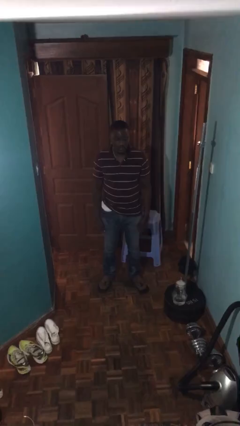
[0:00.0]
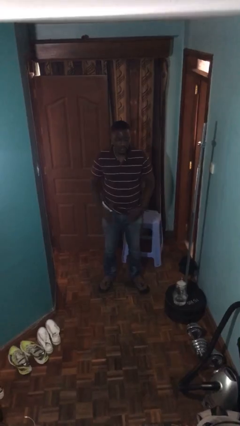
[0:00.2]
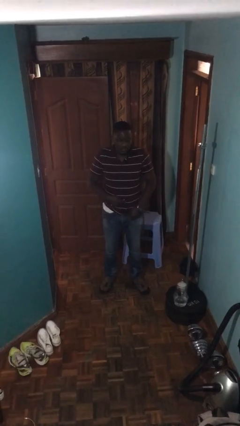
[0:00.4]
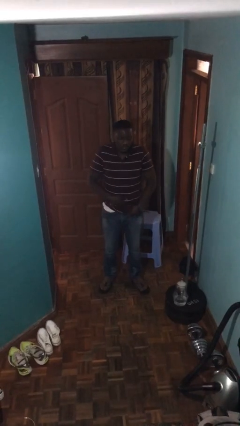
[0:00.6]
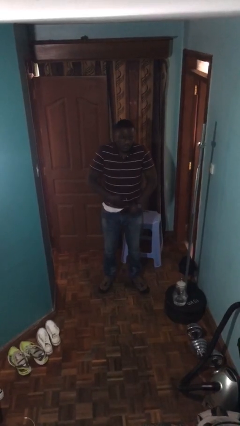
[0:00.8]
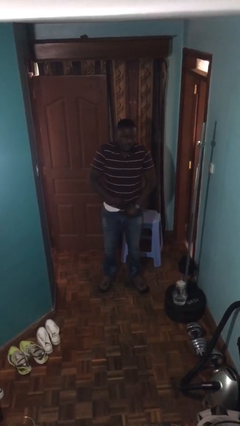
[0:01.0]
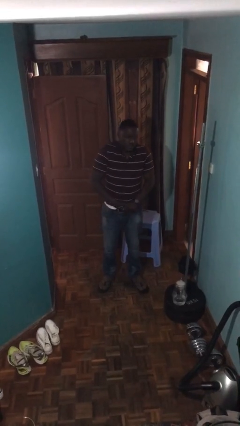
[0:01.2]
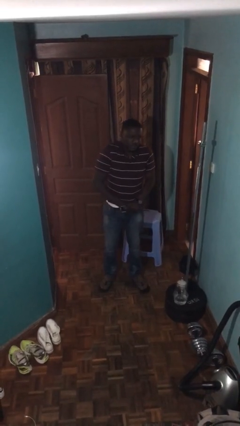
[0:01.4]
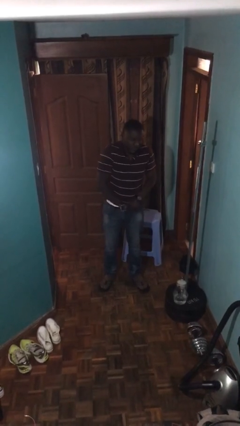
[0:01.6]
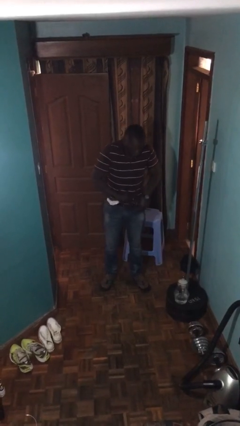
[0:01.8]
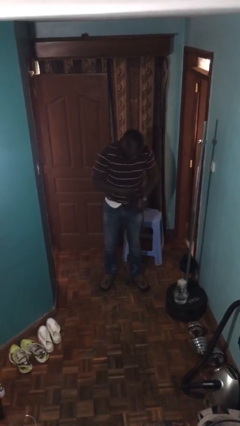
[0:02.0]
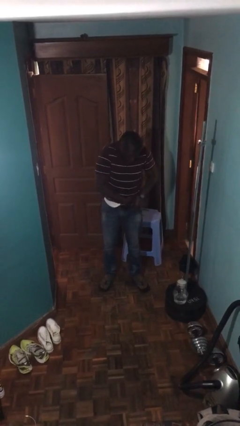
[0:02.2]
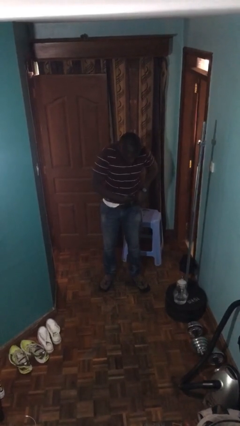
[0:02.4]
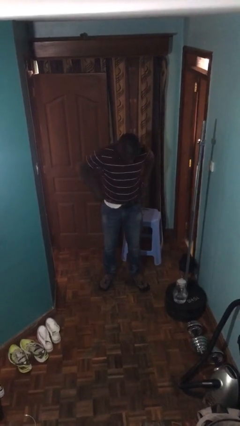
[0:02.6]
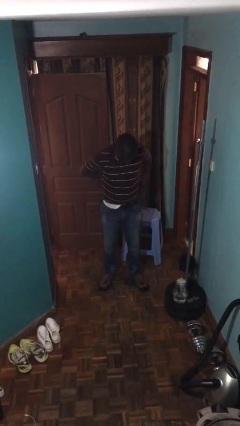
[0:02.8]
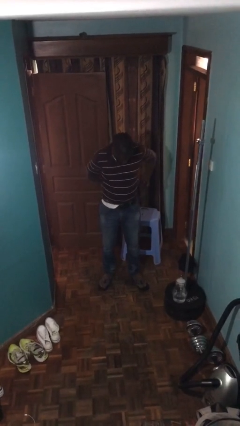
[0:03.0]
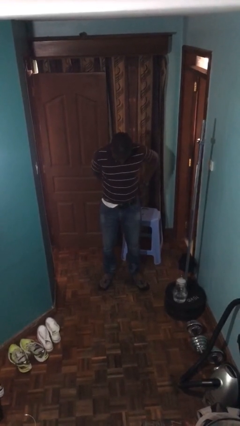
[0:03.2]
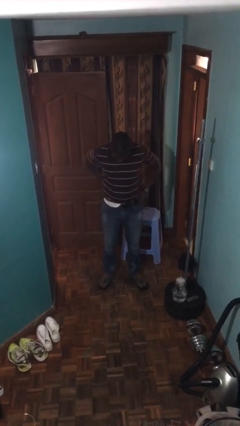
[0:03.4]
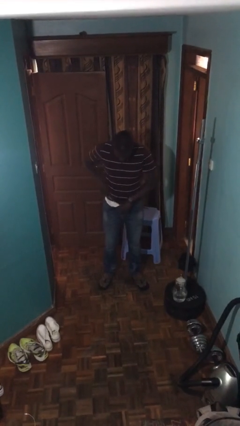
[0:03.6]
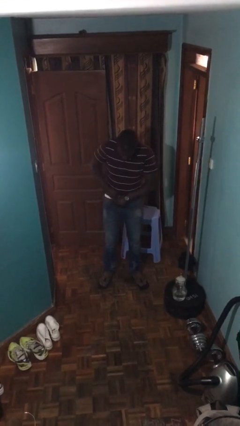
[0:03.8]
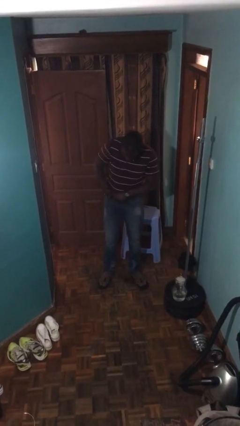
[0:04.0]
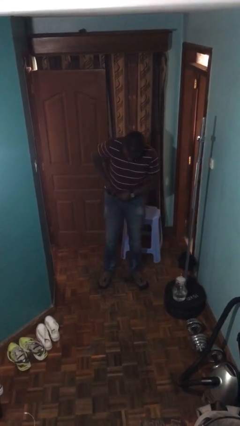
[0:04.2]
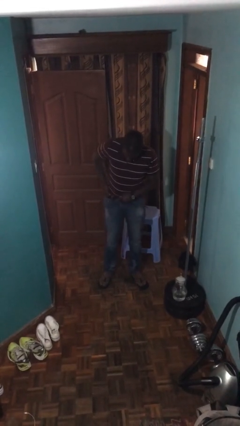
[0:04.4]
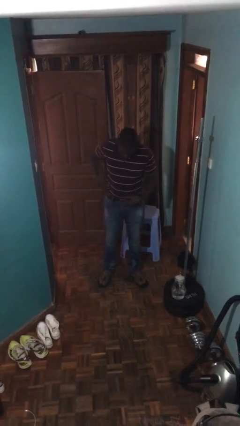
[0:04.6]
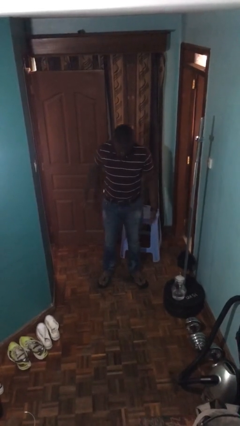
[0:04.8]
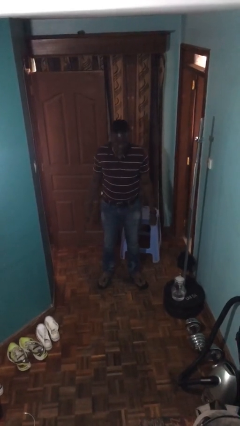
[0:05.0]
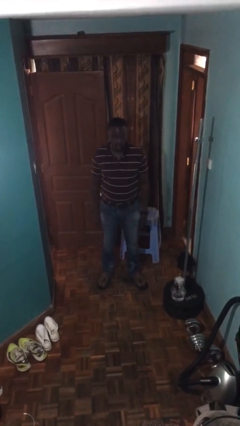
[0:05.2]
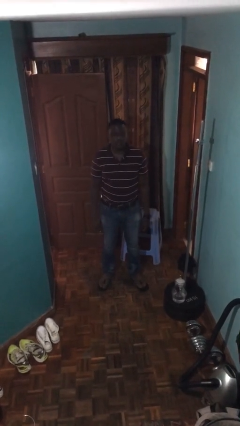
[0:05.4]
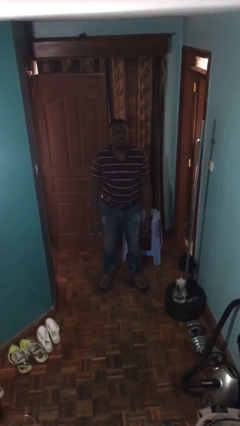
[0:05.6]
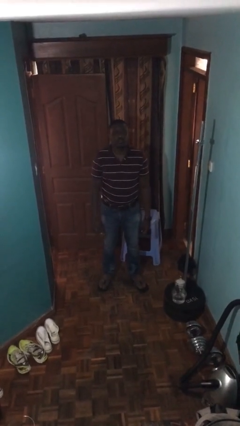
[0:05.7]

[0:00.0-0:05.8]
person tucks in shirt

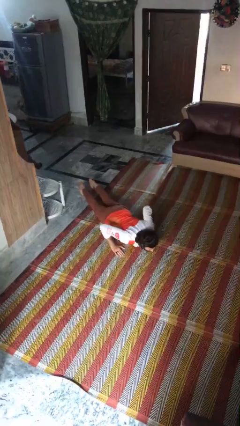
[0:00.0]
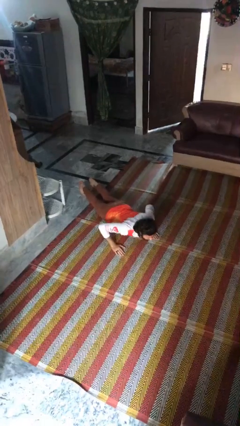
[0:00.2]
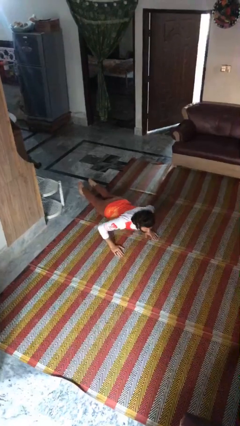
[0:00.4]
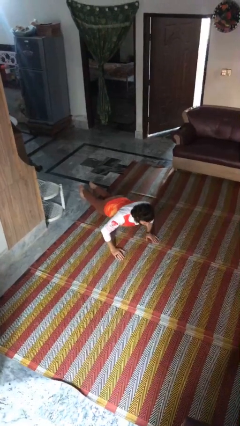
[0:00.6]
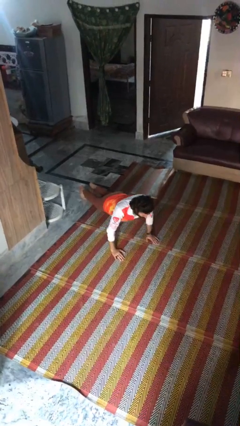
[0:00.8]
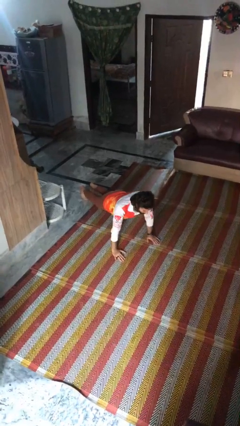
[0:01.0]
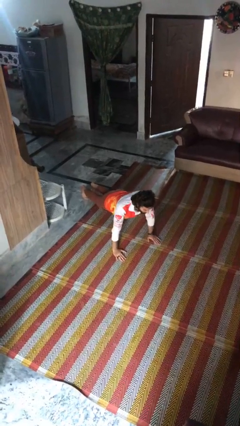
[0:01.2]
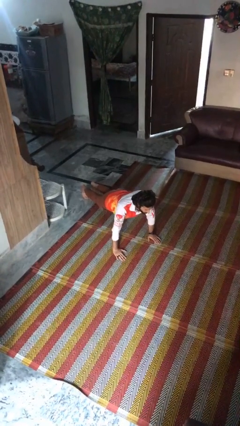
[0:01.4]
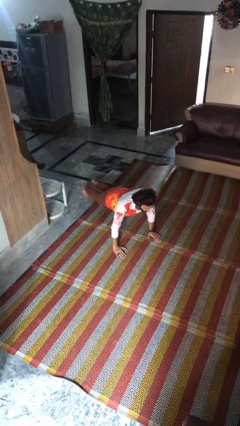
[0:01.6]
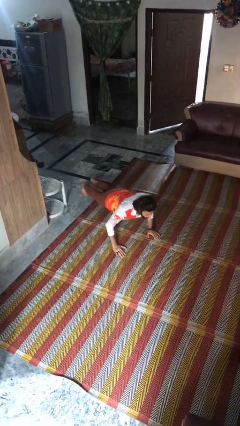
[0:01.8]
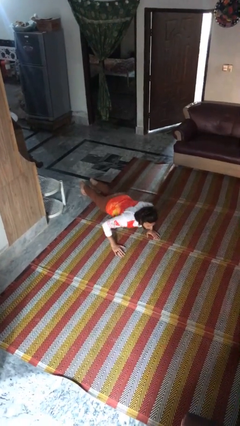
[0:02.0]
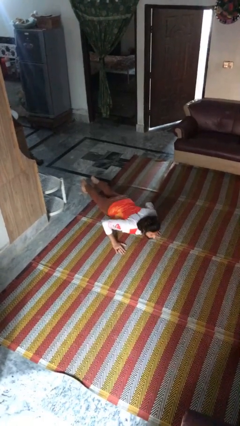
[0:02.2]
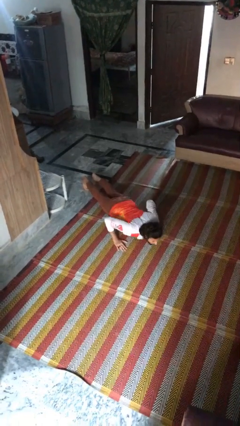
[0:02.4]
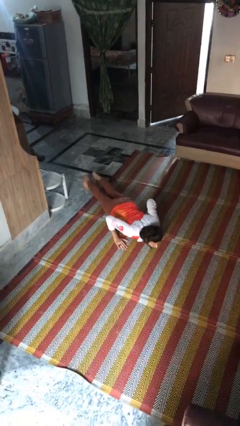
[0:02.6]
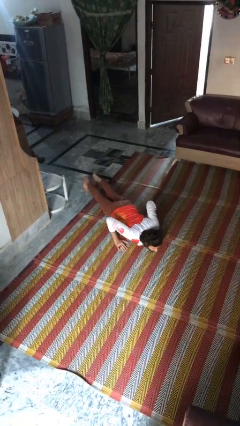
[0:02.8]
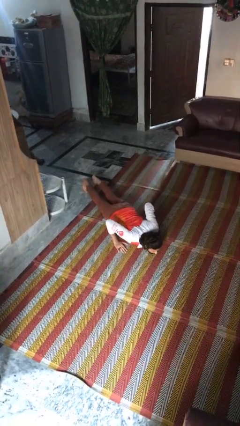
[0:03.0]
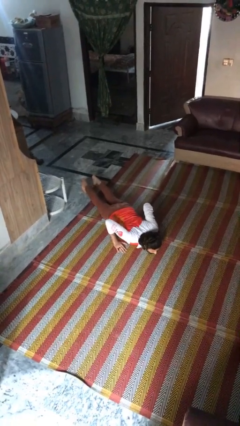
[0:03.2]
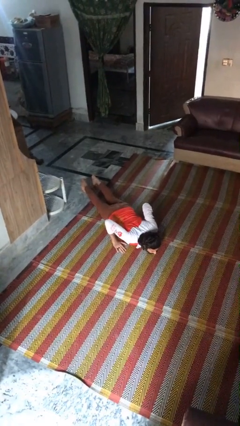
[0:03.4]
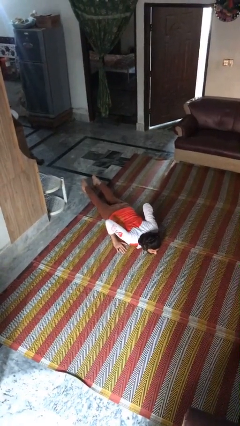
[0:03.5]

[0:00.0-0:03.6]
person exercises with pushup

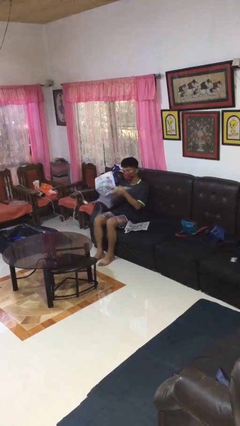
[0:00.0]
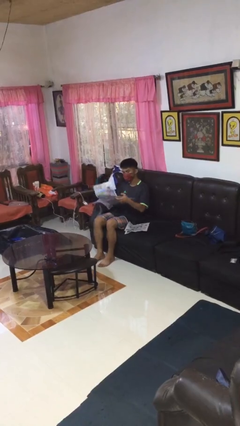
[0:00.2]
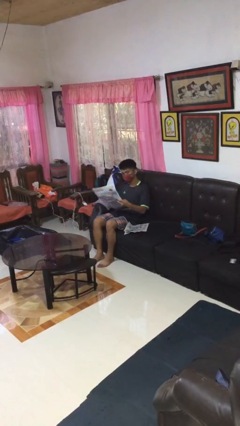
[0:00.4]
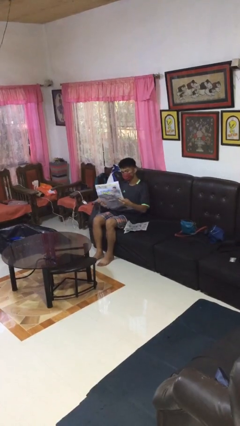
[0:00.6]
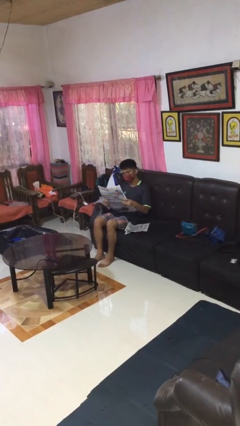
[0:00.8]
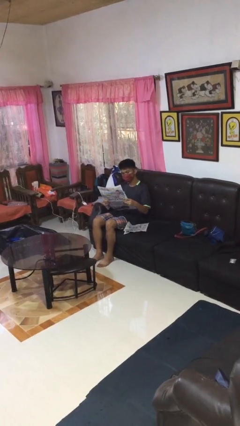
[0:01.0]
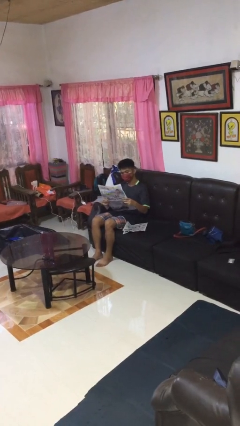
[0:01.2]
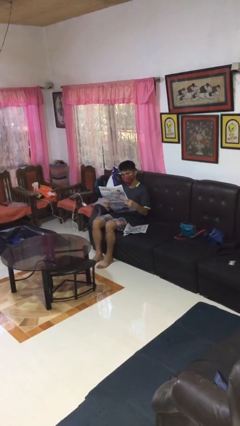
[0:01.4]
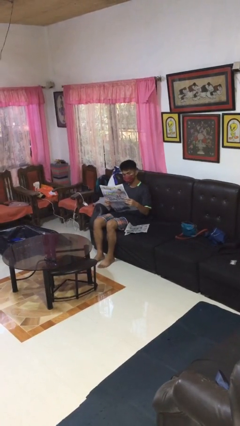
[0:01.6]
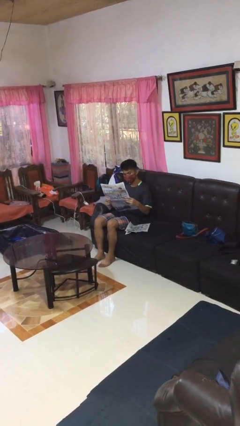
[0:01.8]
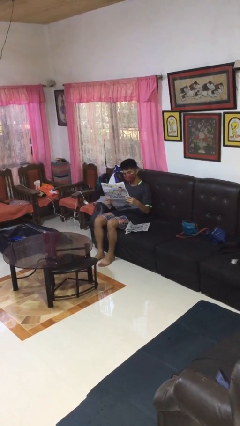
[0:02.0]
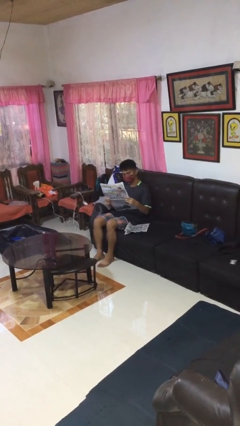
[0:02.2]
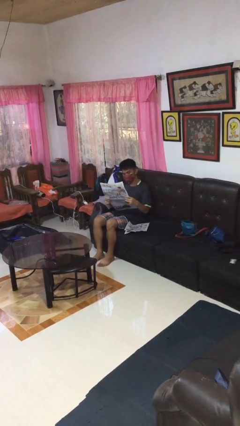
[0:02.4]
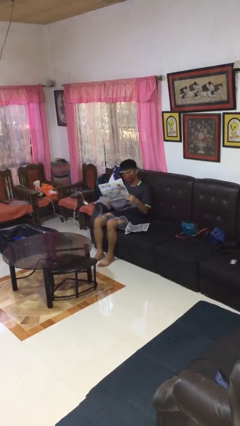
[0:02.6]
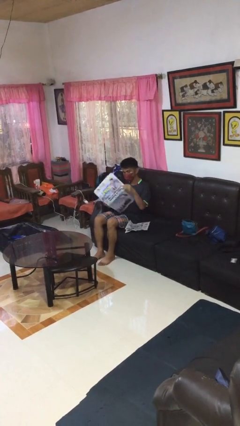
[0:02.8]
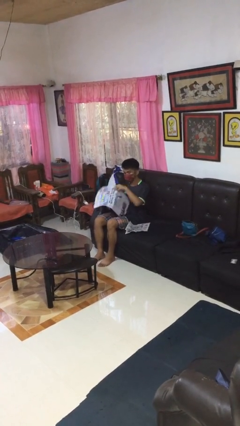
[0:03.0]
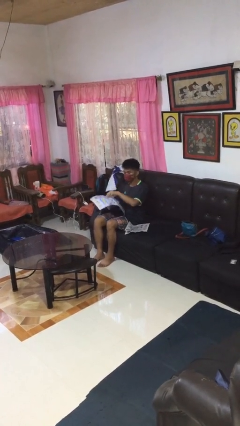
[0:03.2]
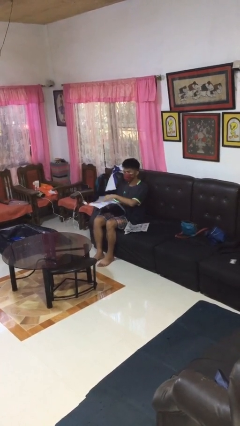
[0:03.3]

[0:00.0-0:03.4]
person reads newspaper

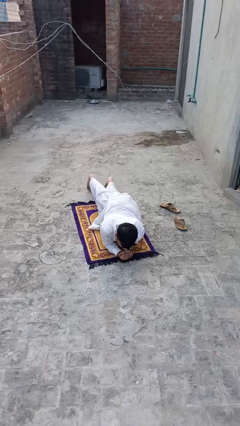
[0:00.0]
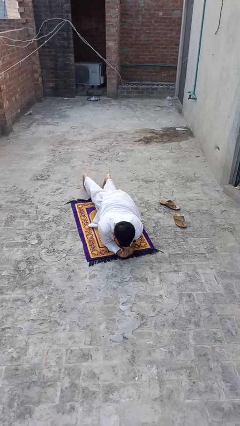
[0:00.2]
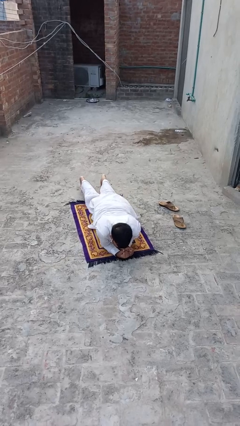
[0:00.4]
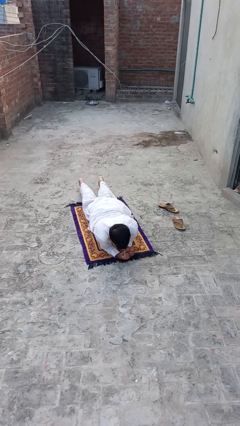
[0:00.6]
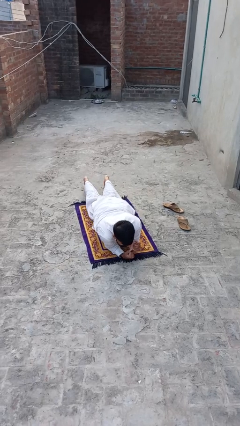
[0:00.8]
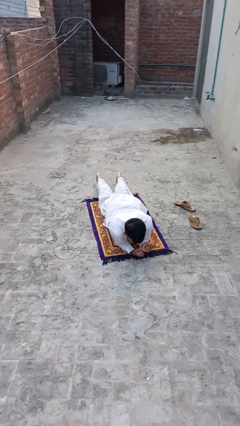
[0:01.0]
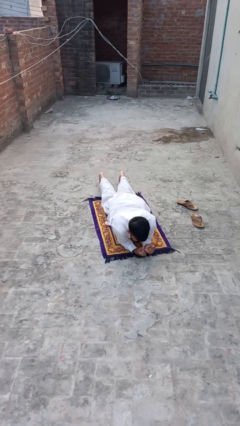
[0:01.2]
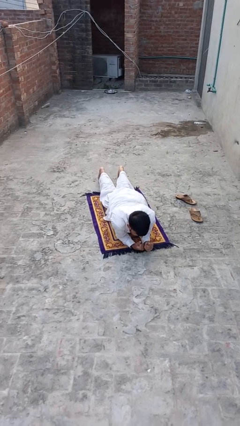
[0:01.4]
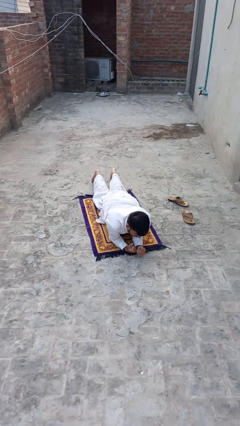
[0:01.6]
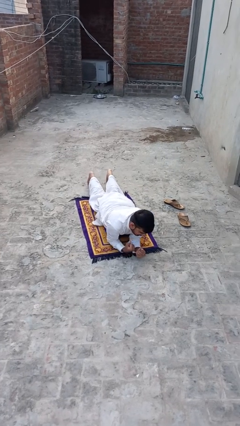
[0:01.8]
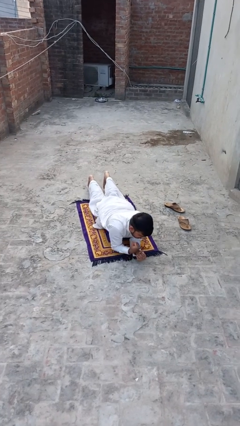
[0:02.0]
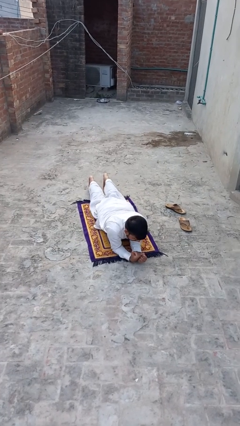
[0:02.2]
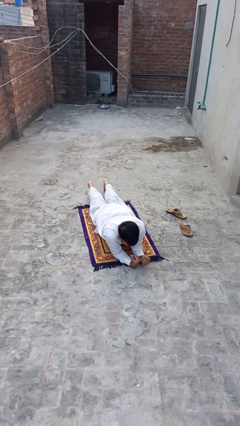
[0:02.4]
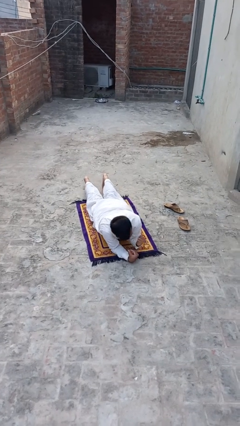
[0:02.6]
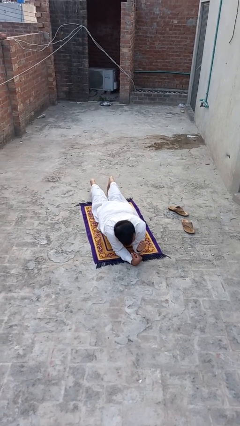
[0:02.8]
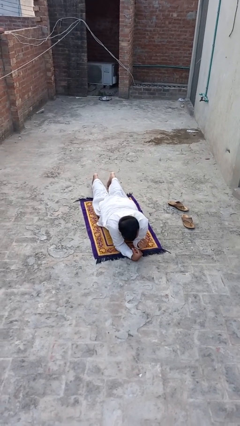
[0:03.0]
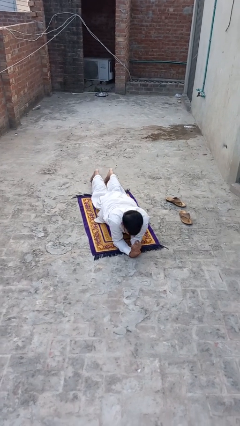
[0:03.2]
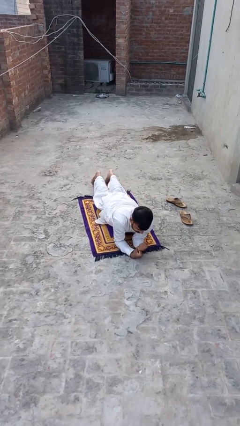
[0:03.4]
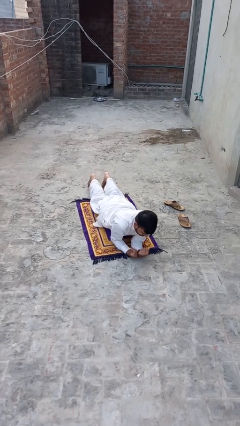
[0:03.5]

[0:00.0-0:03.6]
person crawls

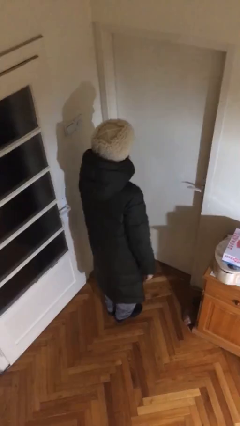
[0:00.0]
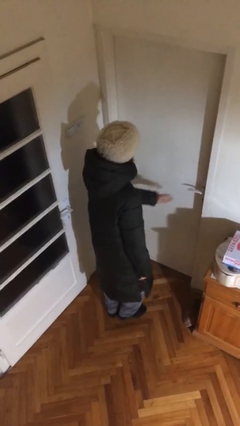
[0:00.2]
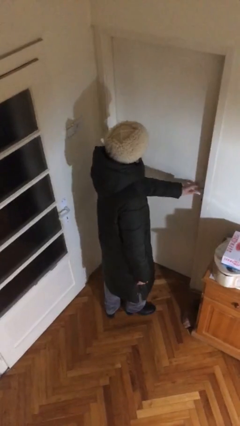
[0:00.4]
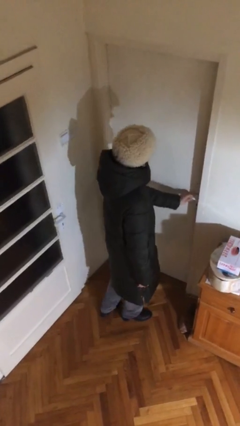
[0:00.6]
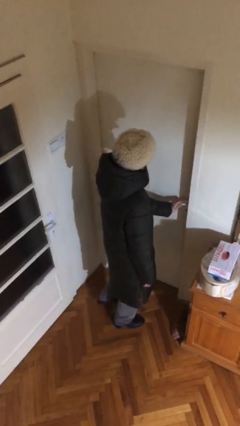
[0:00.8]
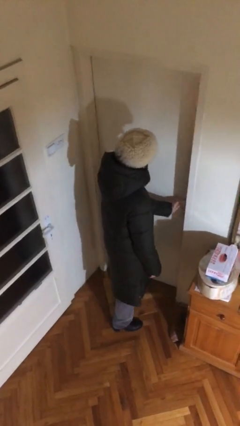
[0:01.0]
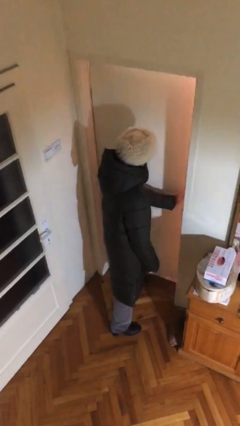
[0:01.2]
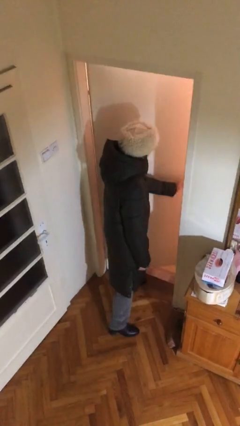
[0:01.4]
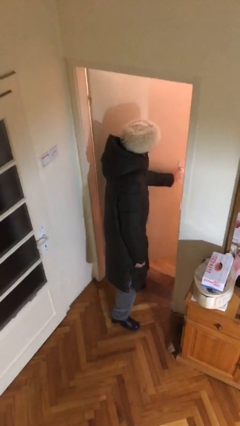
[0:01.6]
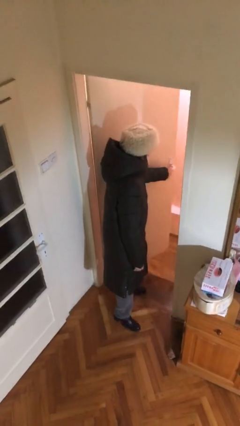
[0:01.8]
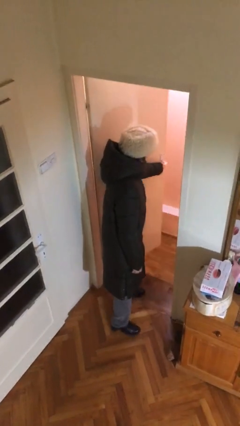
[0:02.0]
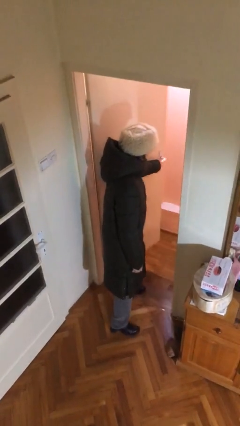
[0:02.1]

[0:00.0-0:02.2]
person opens facility door
